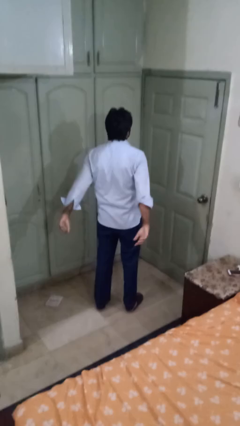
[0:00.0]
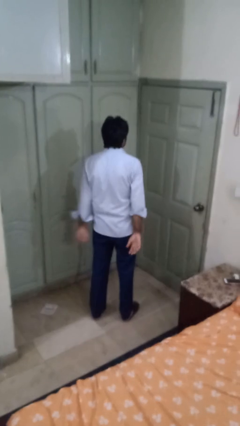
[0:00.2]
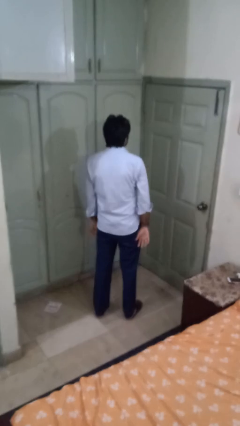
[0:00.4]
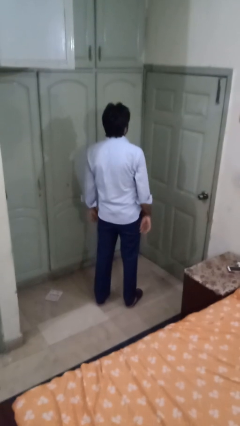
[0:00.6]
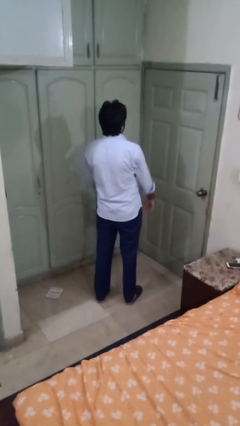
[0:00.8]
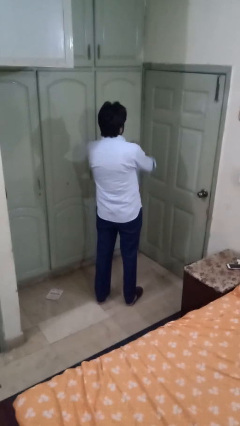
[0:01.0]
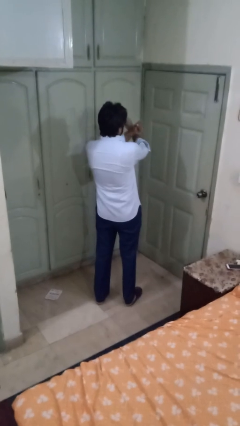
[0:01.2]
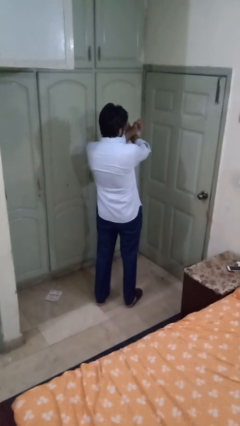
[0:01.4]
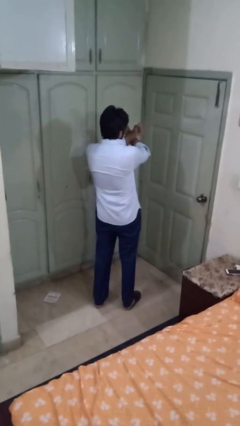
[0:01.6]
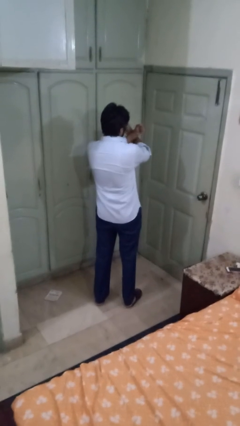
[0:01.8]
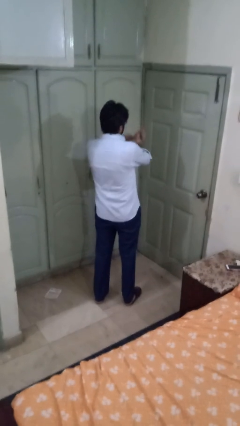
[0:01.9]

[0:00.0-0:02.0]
person gestures arms x

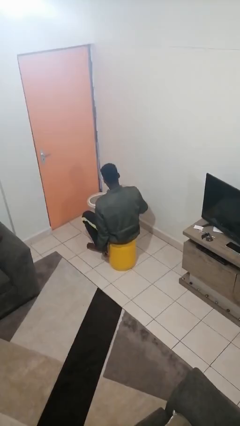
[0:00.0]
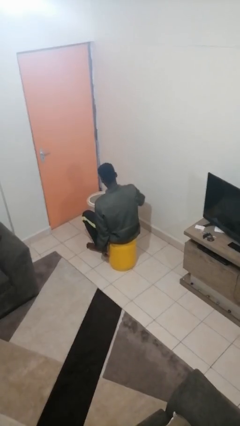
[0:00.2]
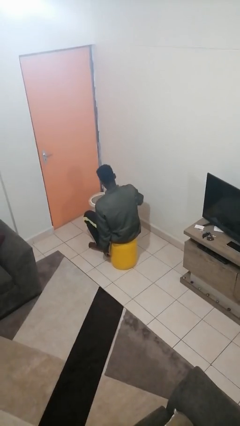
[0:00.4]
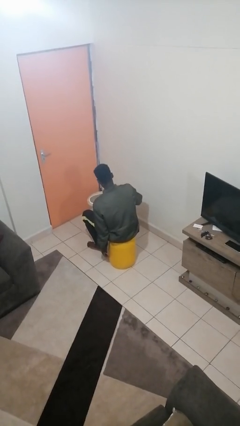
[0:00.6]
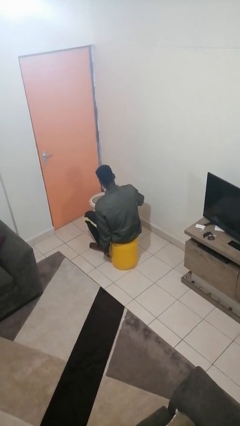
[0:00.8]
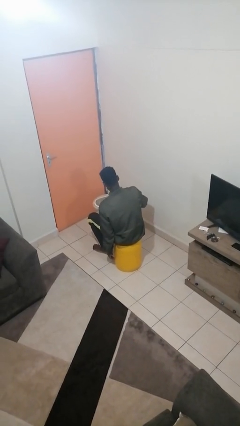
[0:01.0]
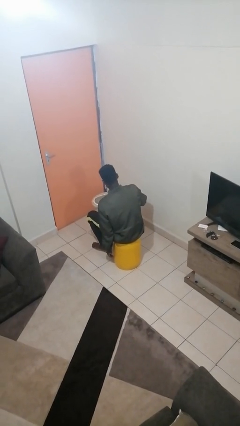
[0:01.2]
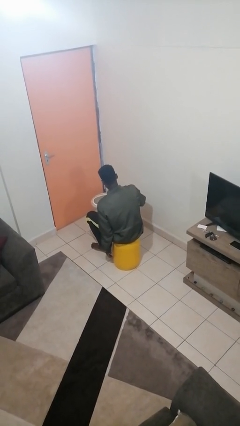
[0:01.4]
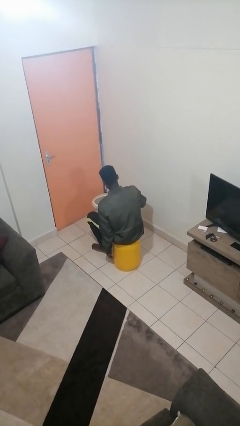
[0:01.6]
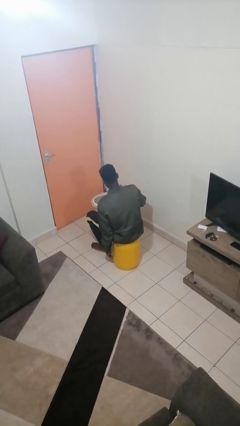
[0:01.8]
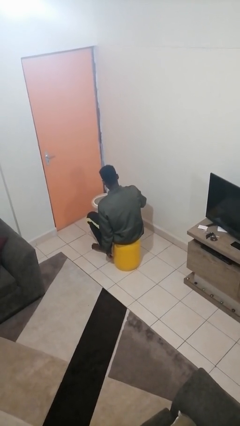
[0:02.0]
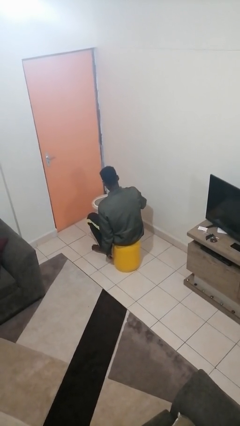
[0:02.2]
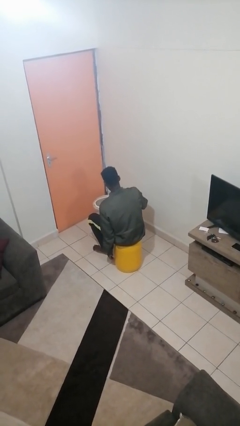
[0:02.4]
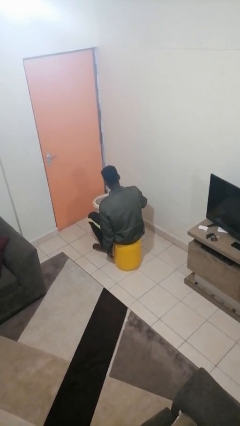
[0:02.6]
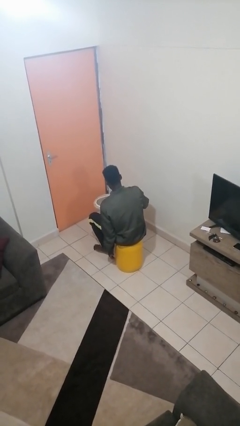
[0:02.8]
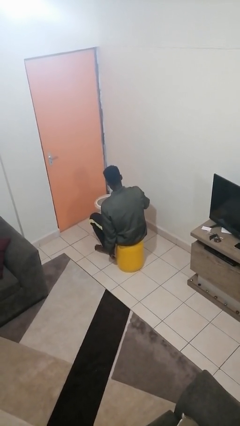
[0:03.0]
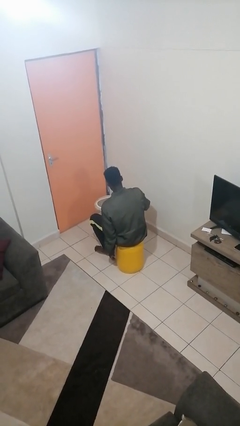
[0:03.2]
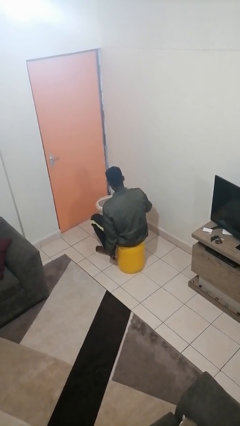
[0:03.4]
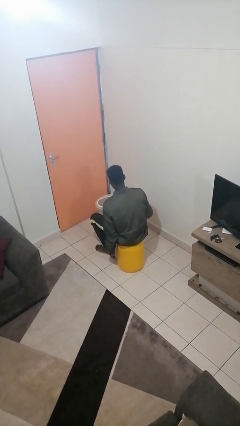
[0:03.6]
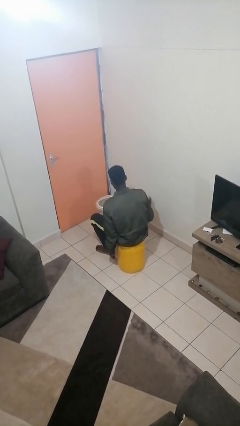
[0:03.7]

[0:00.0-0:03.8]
person taps object with finger

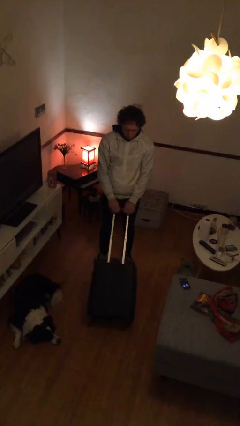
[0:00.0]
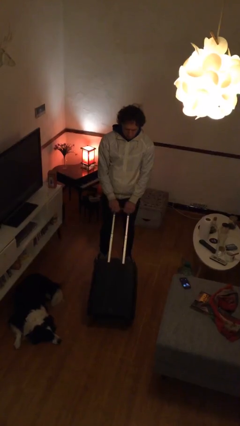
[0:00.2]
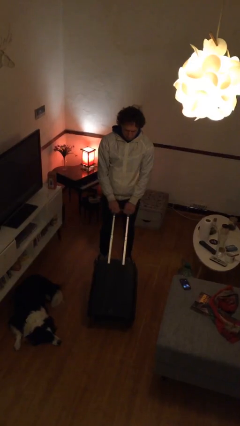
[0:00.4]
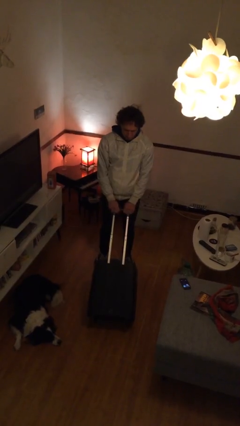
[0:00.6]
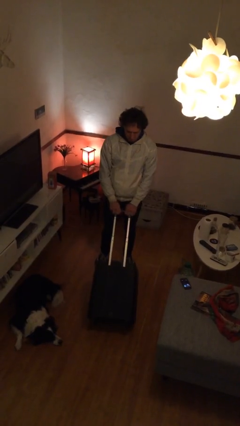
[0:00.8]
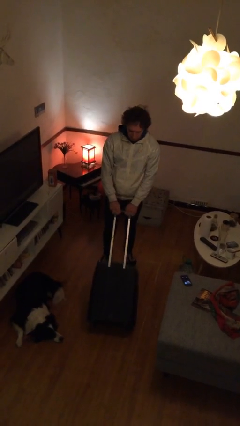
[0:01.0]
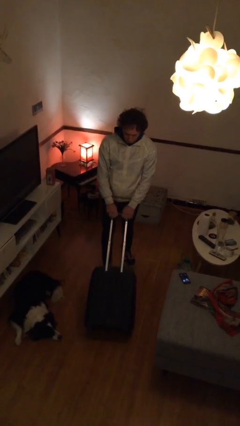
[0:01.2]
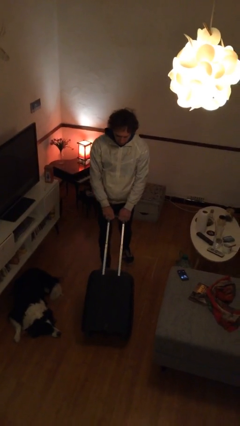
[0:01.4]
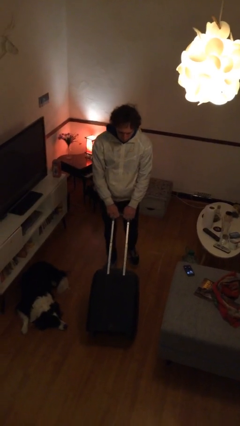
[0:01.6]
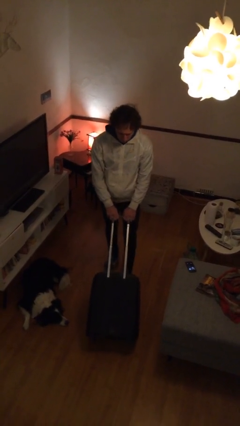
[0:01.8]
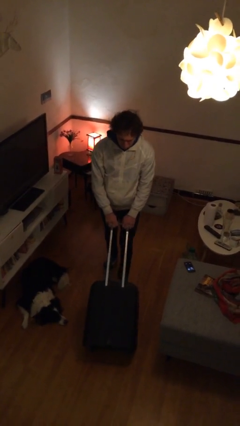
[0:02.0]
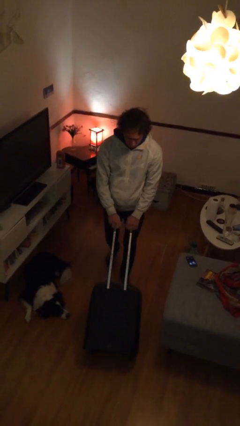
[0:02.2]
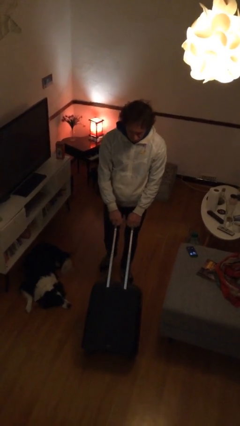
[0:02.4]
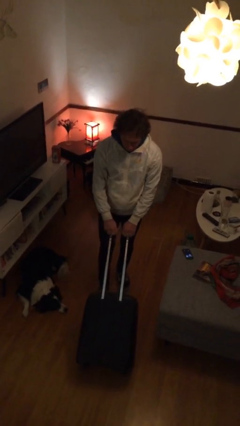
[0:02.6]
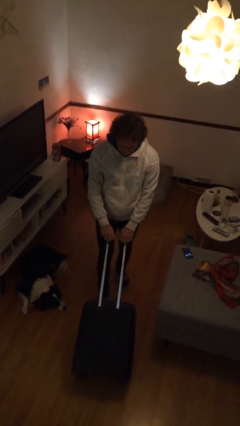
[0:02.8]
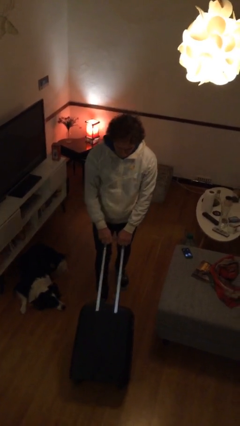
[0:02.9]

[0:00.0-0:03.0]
person pushes wheeled cart

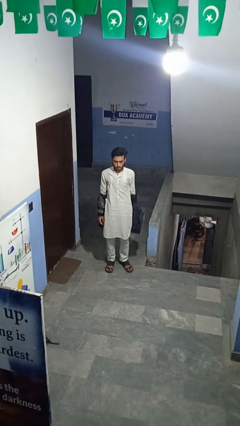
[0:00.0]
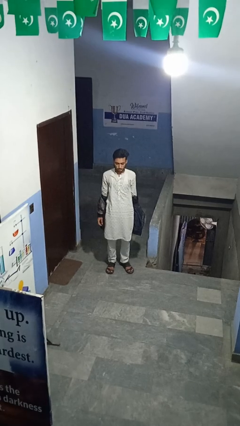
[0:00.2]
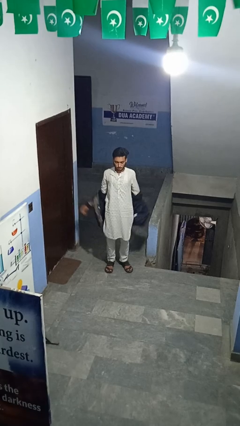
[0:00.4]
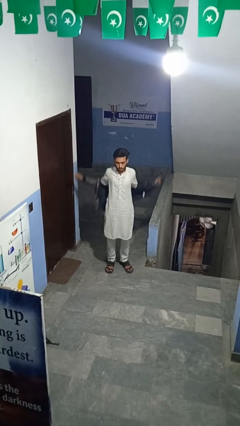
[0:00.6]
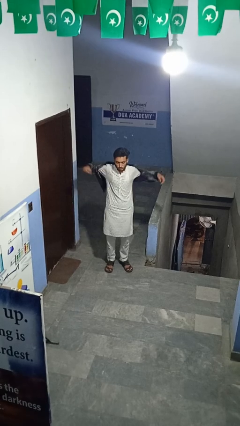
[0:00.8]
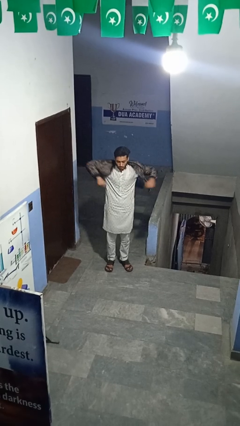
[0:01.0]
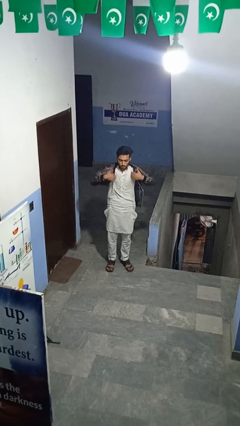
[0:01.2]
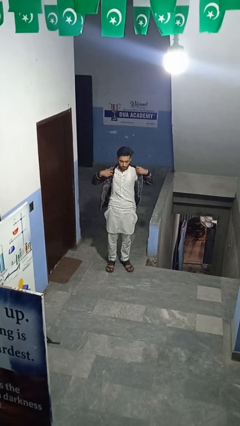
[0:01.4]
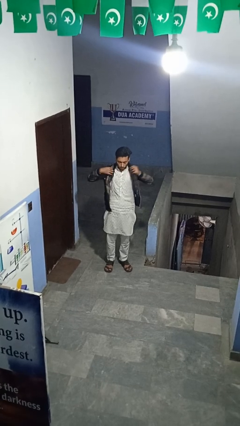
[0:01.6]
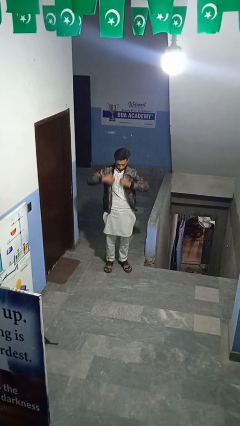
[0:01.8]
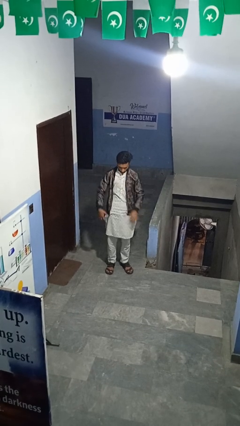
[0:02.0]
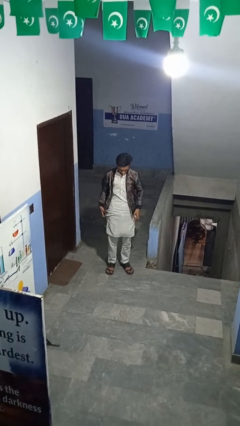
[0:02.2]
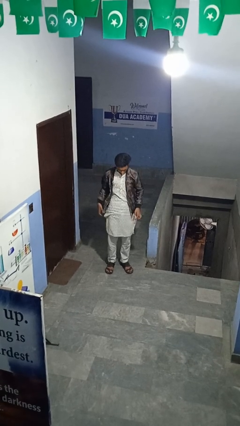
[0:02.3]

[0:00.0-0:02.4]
person puts on jacket

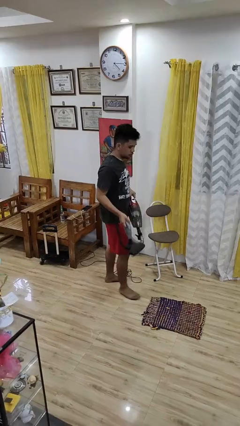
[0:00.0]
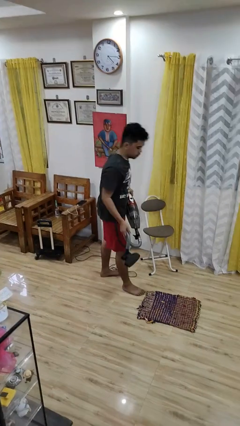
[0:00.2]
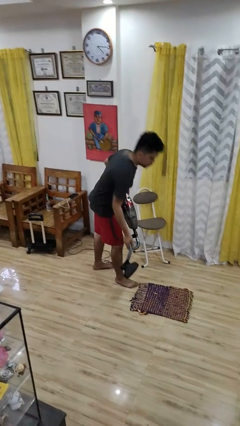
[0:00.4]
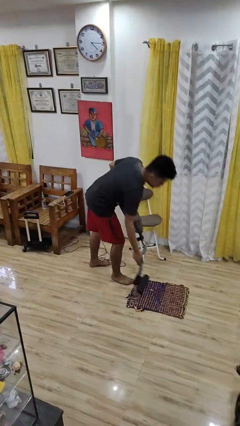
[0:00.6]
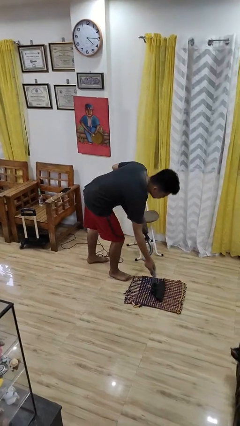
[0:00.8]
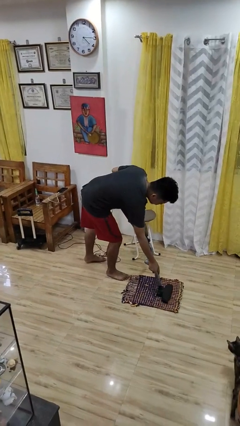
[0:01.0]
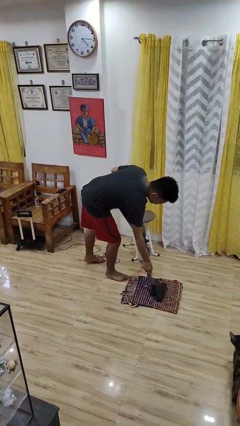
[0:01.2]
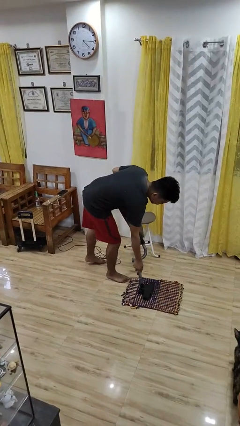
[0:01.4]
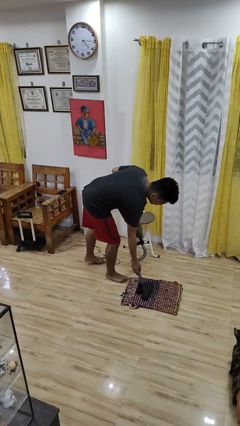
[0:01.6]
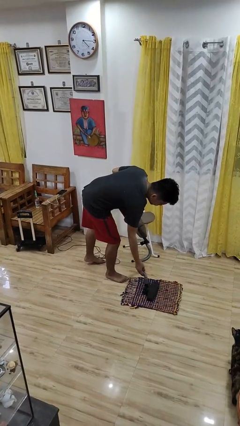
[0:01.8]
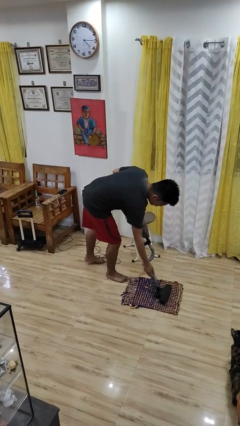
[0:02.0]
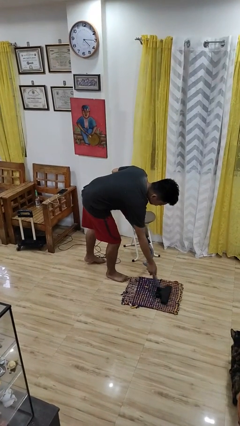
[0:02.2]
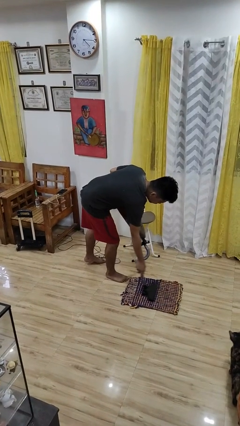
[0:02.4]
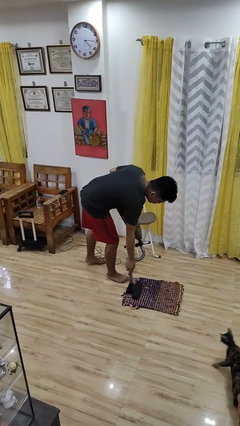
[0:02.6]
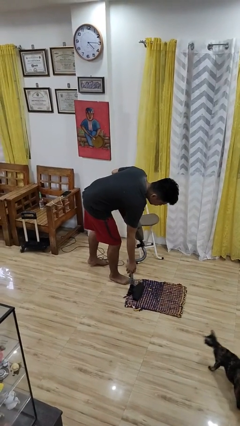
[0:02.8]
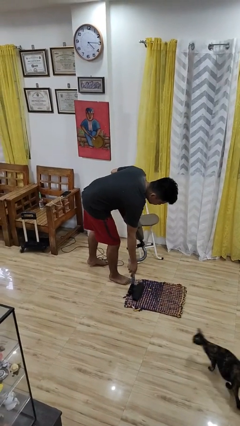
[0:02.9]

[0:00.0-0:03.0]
person vacuums carpet

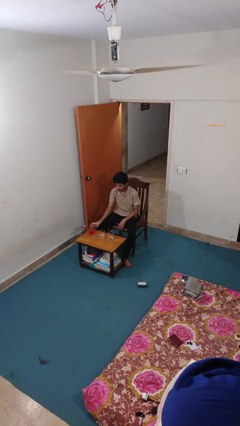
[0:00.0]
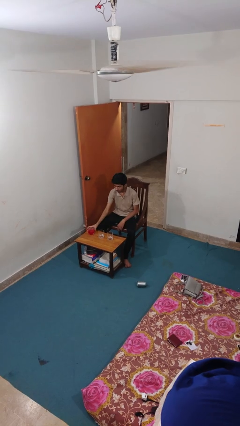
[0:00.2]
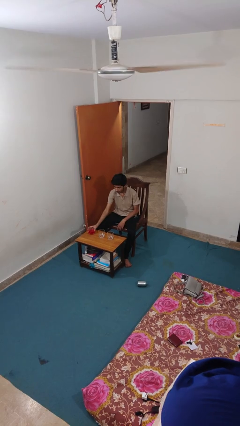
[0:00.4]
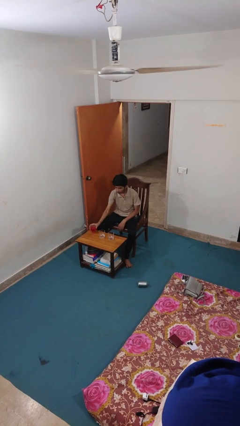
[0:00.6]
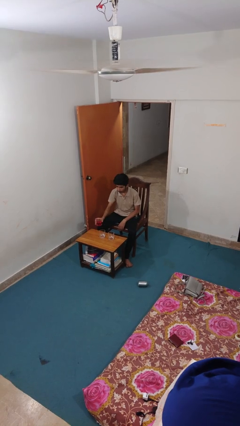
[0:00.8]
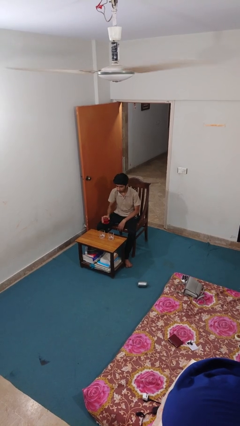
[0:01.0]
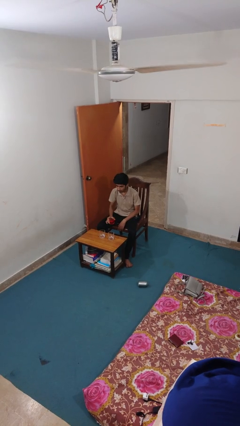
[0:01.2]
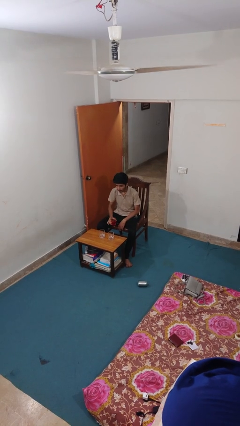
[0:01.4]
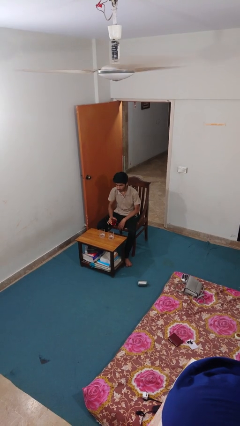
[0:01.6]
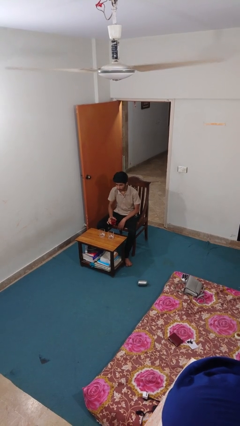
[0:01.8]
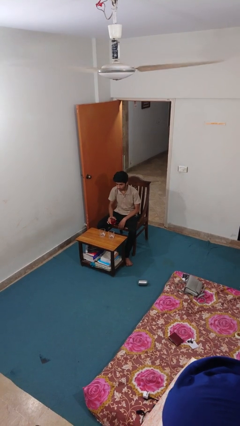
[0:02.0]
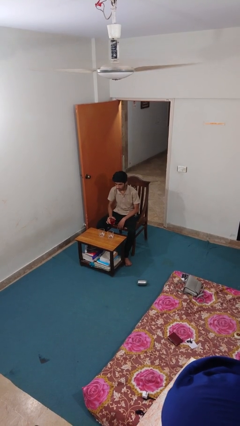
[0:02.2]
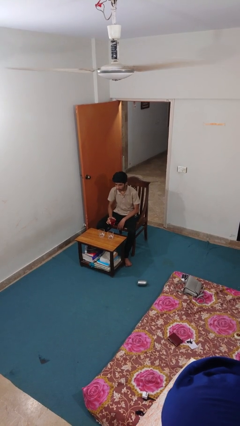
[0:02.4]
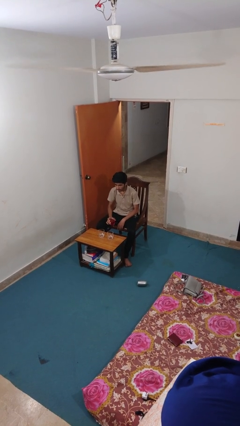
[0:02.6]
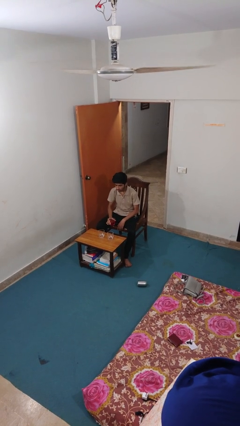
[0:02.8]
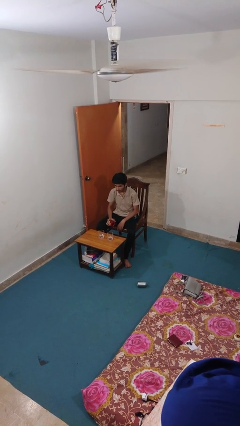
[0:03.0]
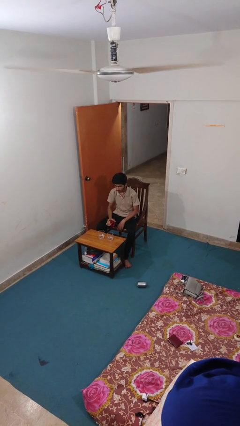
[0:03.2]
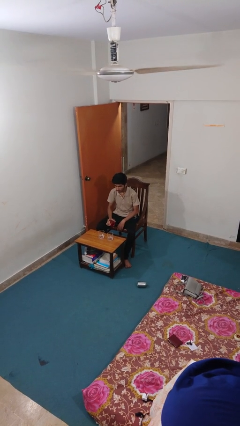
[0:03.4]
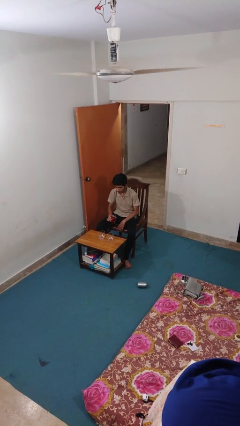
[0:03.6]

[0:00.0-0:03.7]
person picks up object from table
